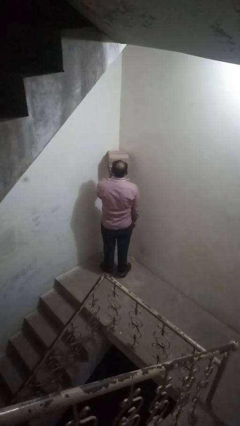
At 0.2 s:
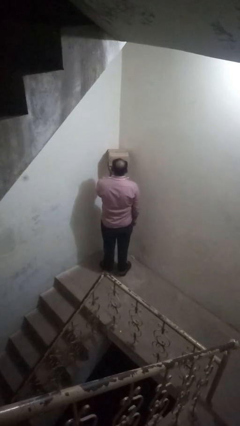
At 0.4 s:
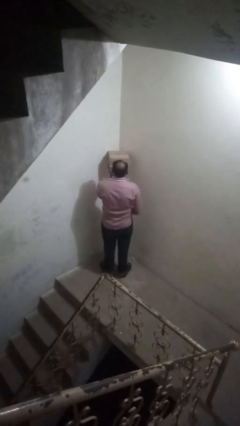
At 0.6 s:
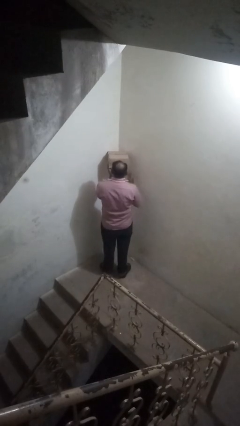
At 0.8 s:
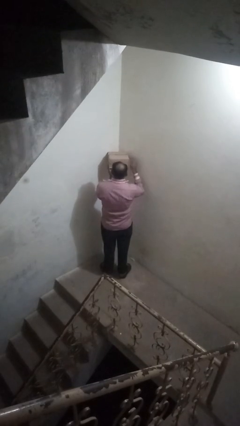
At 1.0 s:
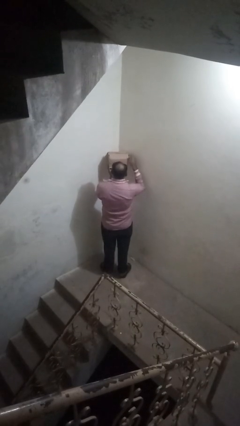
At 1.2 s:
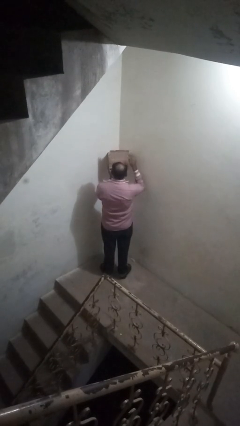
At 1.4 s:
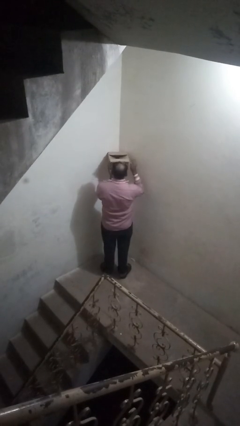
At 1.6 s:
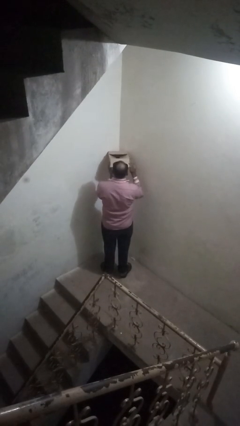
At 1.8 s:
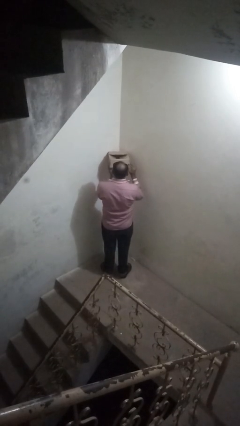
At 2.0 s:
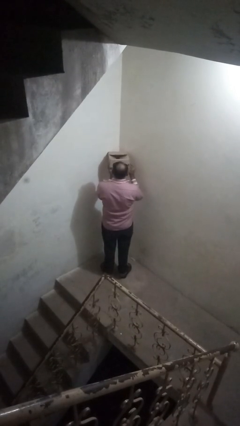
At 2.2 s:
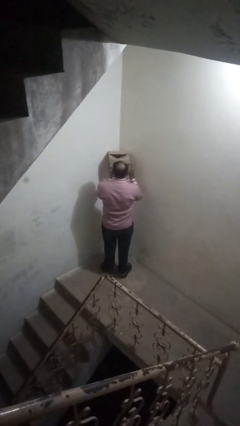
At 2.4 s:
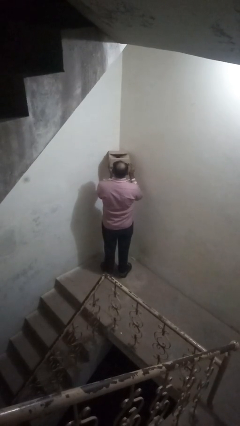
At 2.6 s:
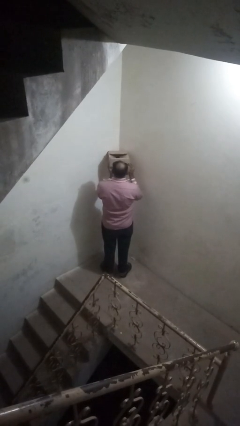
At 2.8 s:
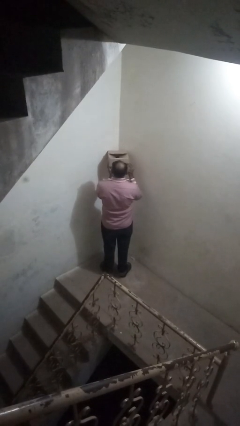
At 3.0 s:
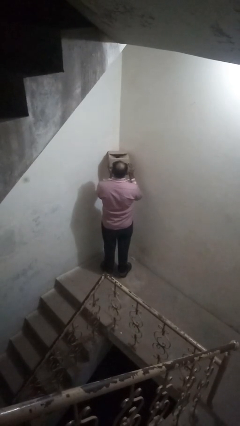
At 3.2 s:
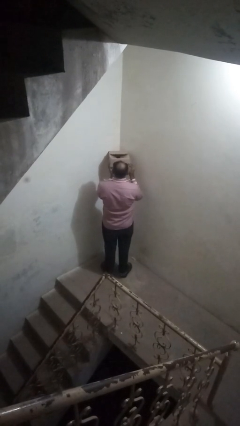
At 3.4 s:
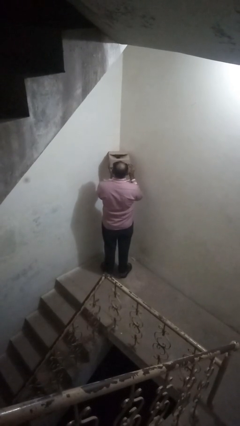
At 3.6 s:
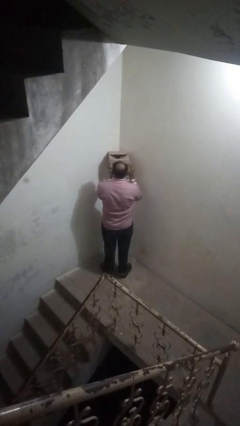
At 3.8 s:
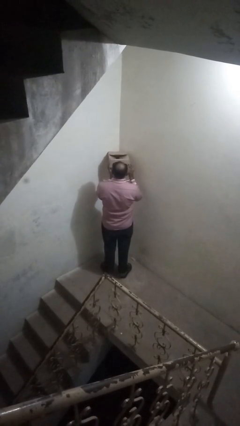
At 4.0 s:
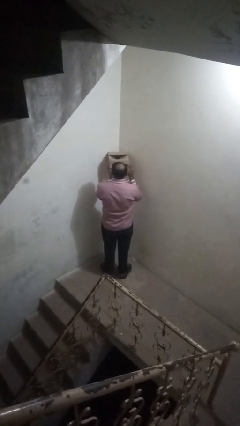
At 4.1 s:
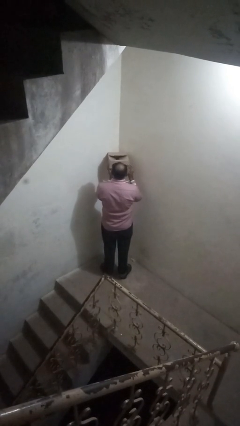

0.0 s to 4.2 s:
person opens mailbox

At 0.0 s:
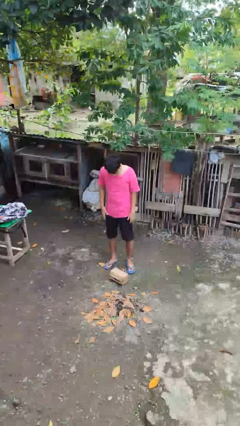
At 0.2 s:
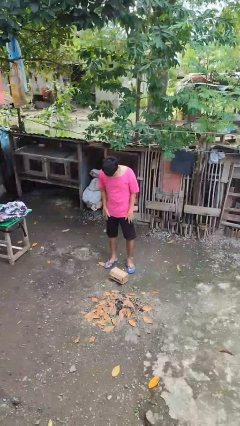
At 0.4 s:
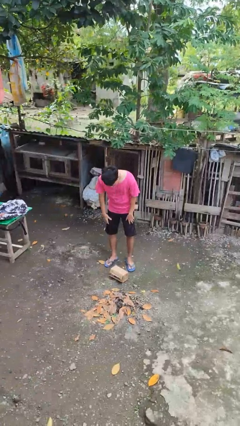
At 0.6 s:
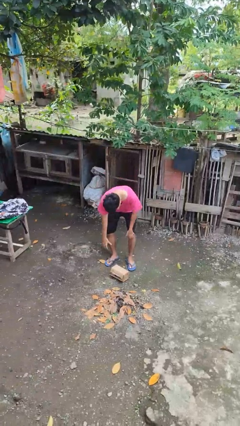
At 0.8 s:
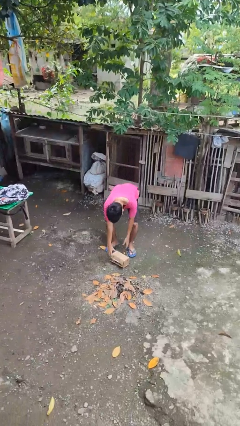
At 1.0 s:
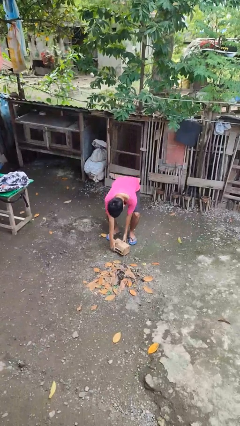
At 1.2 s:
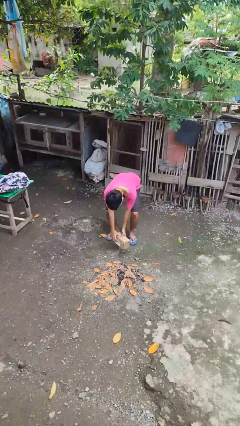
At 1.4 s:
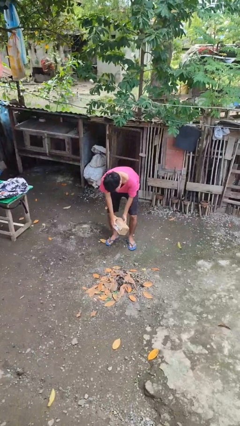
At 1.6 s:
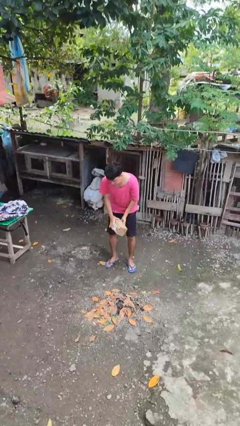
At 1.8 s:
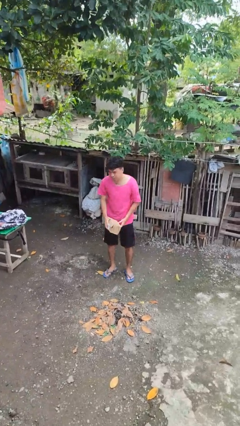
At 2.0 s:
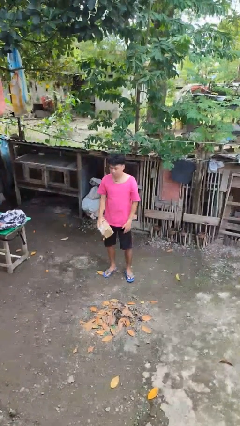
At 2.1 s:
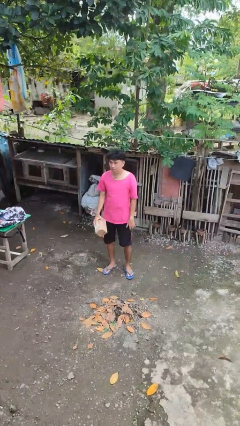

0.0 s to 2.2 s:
person picks up object from floor

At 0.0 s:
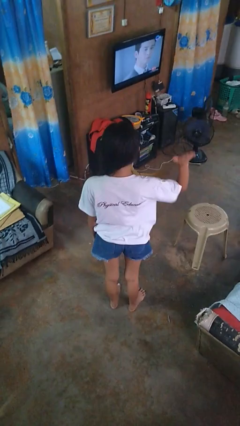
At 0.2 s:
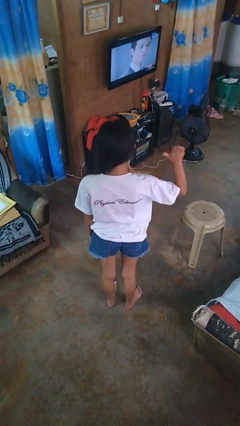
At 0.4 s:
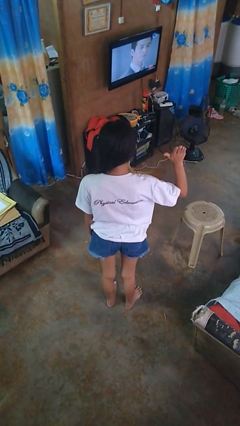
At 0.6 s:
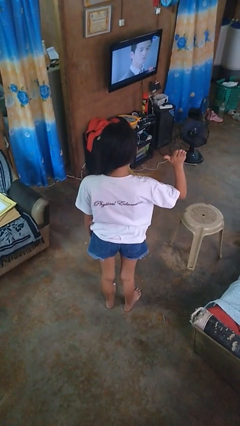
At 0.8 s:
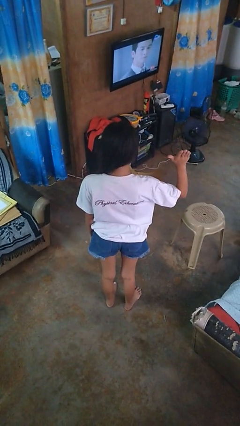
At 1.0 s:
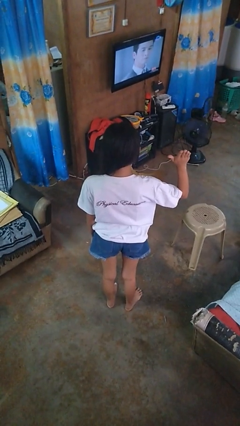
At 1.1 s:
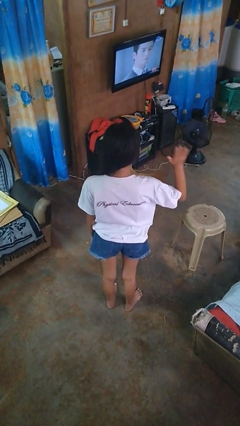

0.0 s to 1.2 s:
person gestures number five

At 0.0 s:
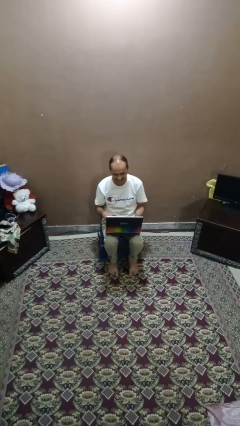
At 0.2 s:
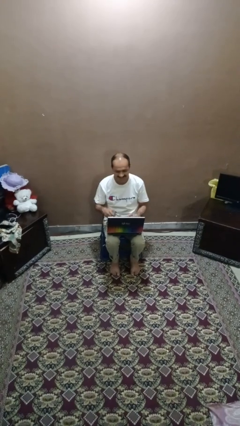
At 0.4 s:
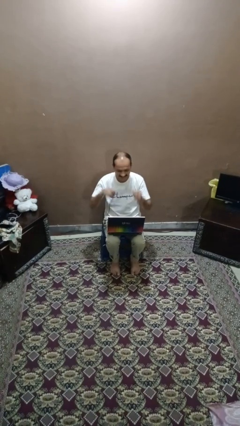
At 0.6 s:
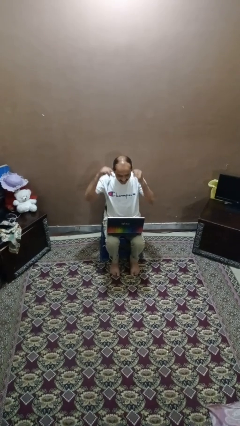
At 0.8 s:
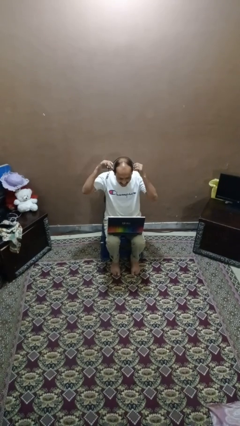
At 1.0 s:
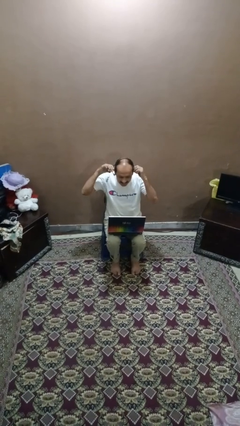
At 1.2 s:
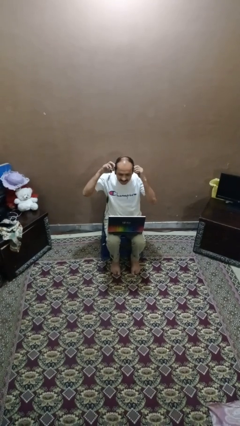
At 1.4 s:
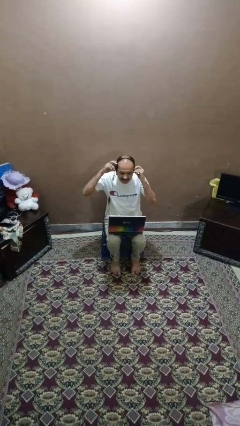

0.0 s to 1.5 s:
person puts on headphones

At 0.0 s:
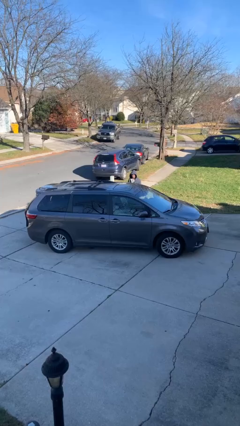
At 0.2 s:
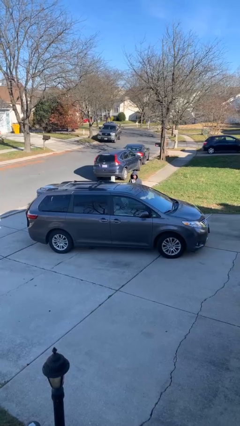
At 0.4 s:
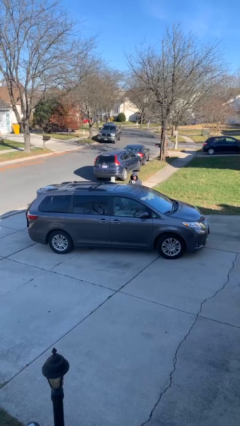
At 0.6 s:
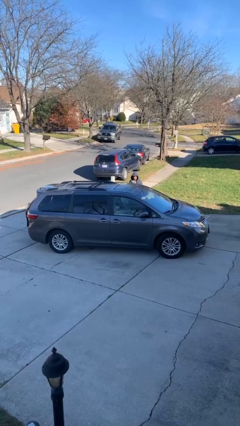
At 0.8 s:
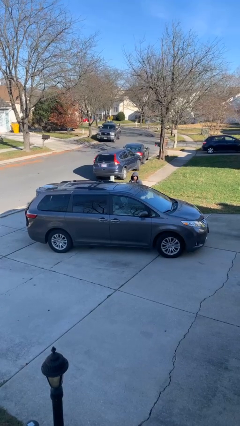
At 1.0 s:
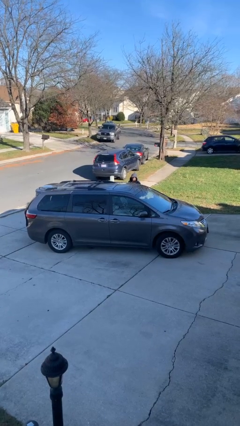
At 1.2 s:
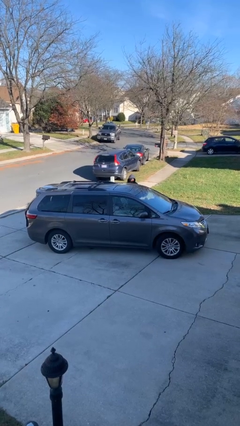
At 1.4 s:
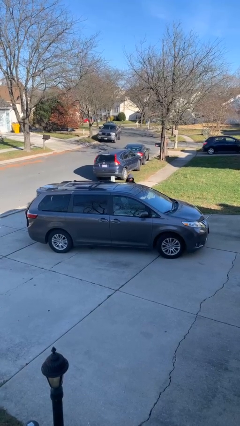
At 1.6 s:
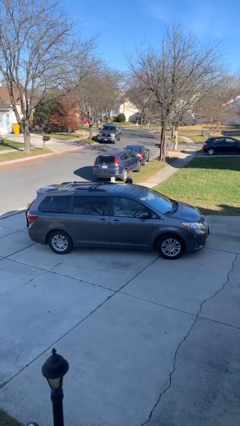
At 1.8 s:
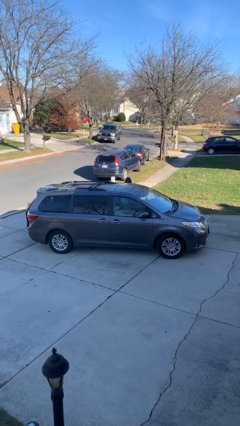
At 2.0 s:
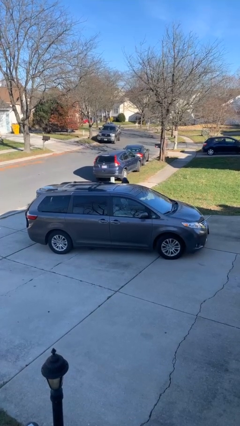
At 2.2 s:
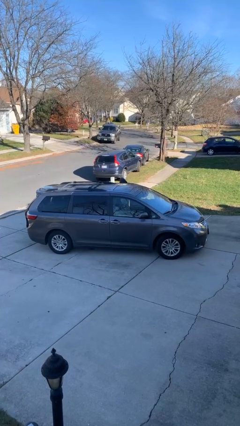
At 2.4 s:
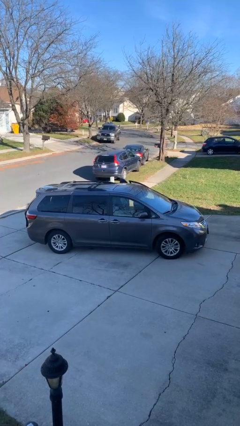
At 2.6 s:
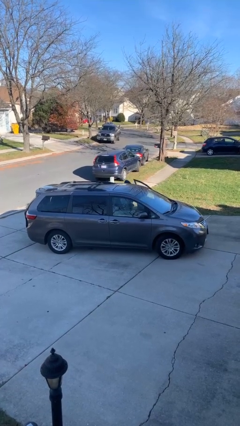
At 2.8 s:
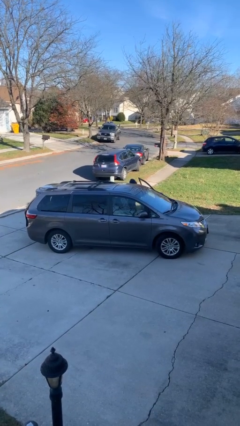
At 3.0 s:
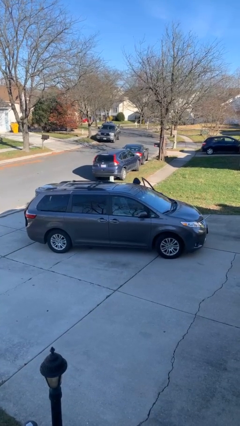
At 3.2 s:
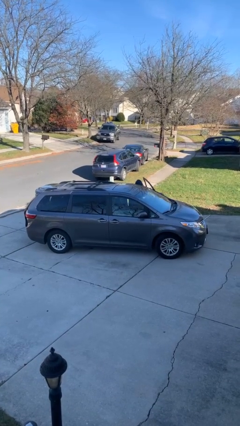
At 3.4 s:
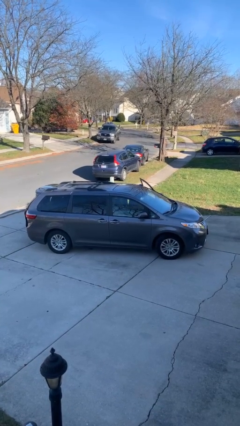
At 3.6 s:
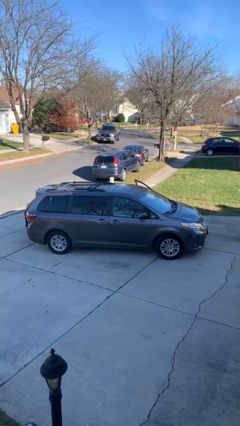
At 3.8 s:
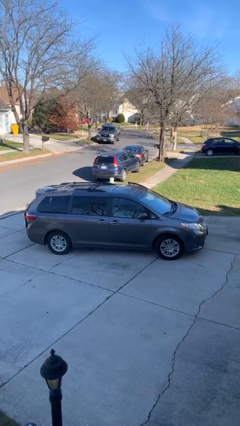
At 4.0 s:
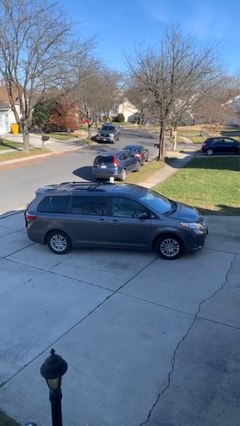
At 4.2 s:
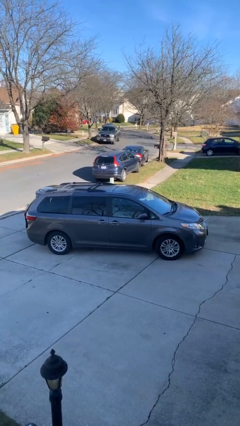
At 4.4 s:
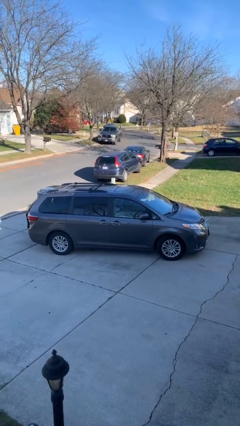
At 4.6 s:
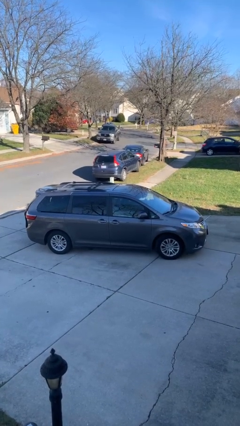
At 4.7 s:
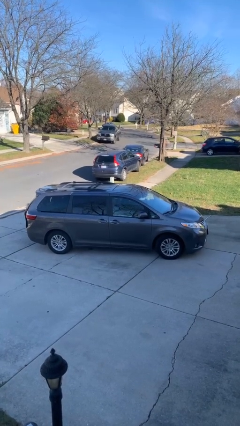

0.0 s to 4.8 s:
car picks up person

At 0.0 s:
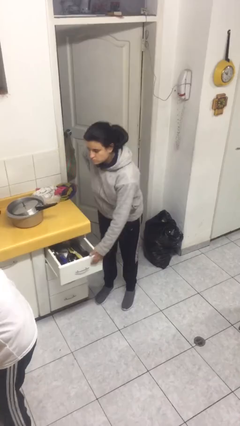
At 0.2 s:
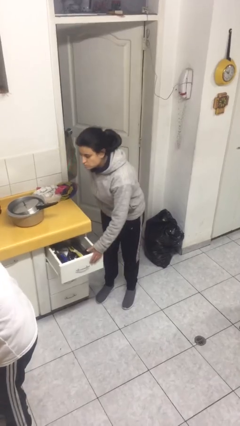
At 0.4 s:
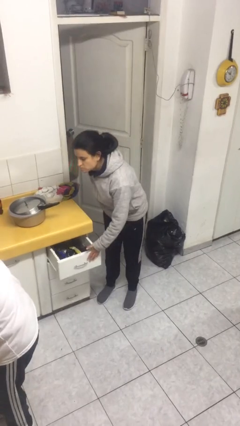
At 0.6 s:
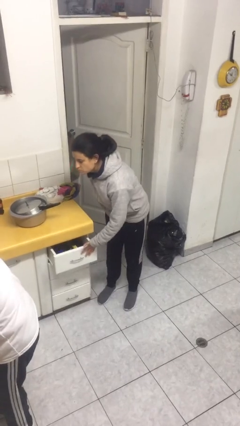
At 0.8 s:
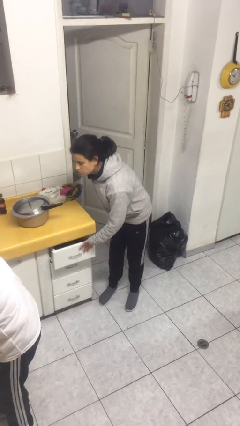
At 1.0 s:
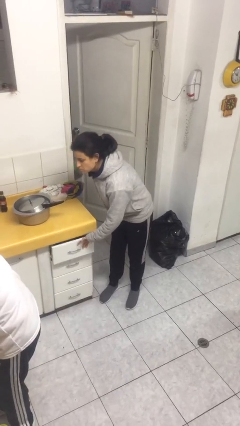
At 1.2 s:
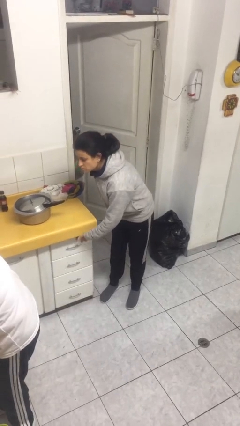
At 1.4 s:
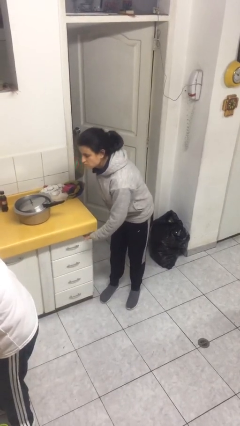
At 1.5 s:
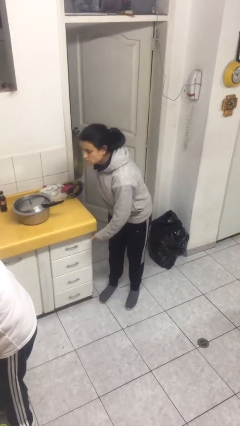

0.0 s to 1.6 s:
person closes kitchen drawer

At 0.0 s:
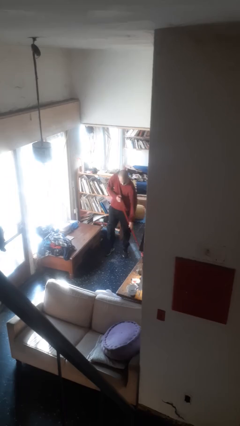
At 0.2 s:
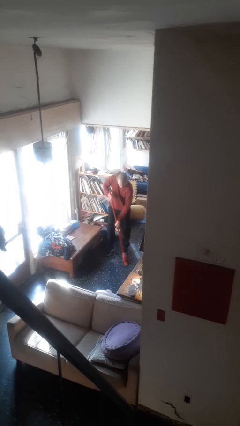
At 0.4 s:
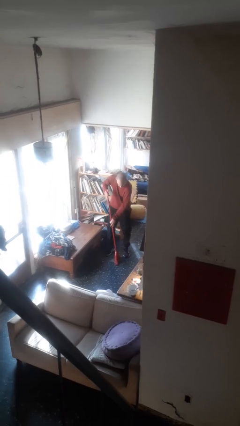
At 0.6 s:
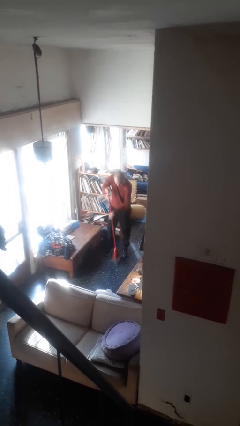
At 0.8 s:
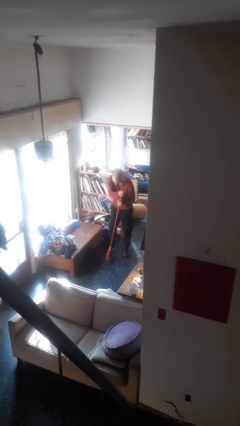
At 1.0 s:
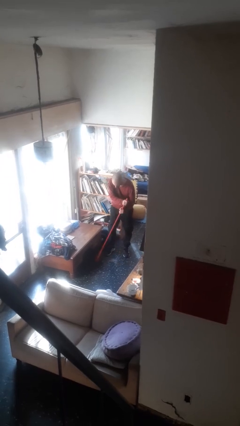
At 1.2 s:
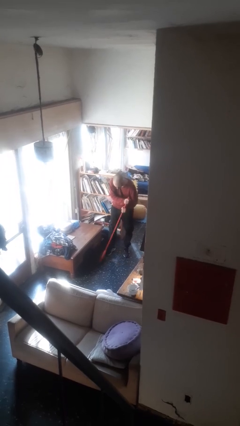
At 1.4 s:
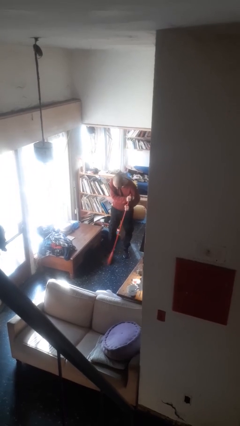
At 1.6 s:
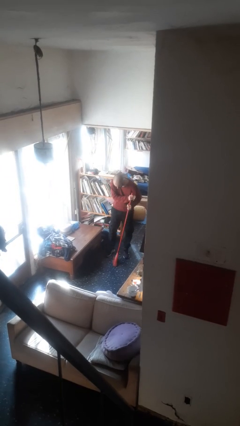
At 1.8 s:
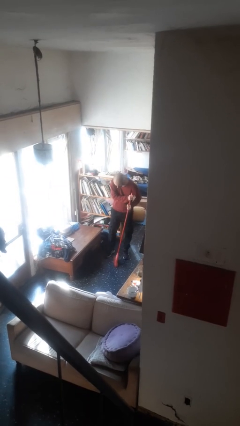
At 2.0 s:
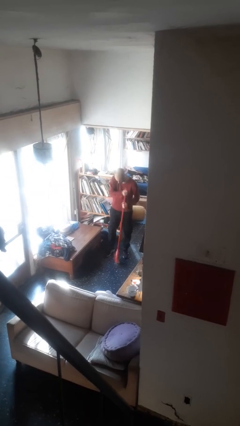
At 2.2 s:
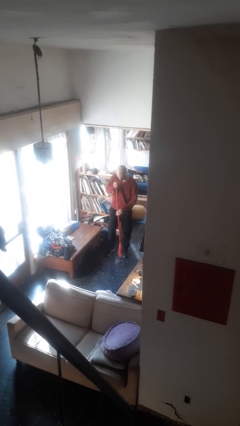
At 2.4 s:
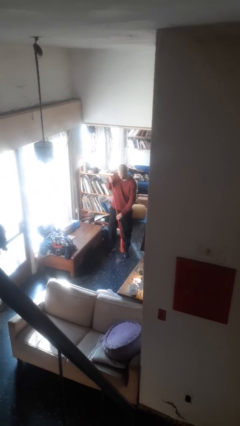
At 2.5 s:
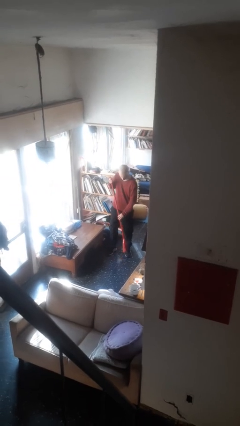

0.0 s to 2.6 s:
person sweeps floor
